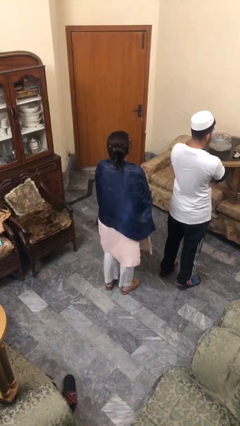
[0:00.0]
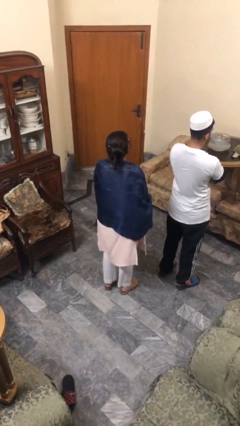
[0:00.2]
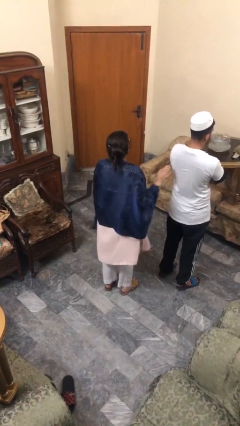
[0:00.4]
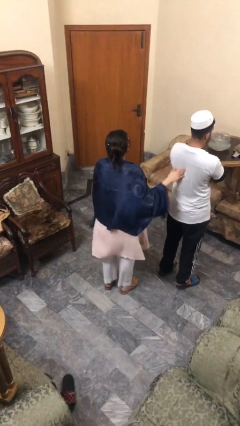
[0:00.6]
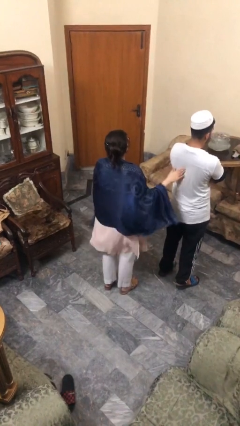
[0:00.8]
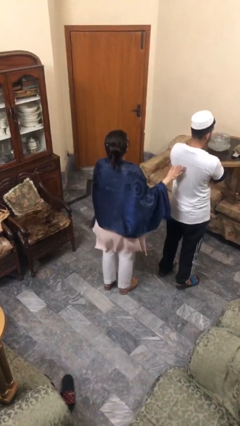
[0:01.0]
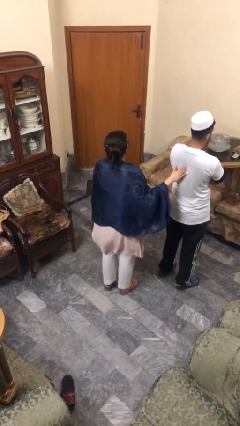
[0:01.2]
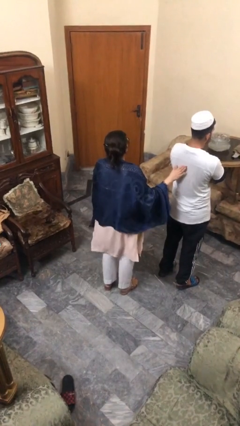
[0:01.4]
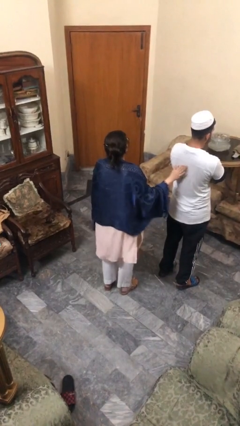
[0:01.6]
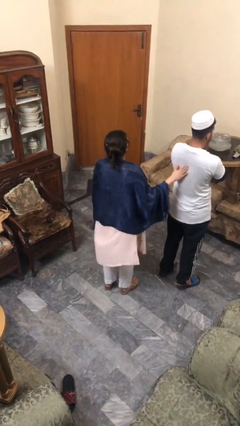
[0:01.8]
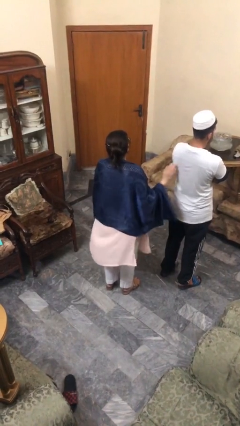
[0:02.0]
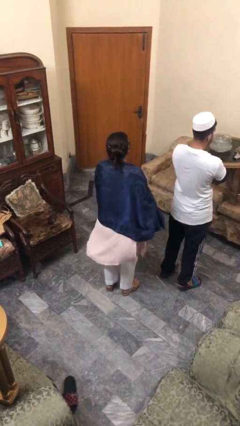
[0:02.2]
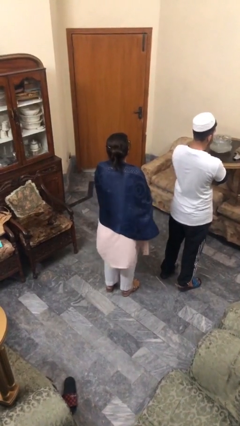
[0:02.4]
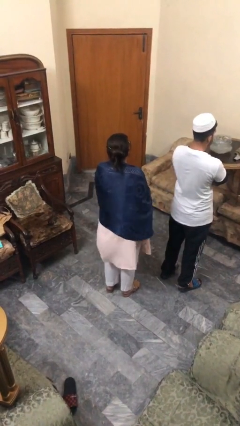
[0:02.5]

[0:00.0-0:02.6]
person touches back of person

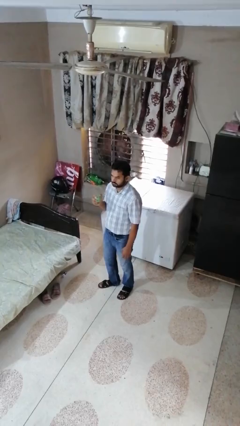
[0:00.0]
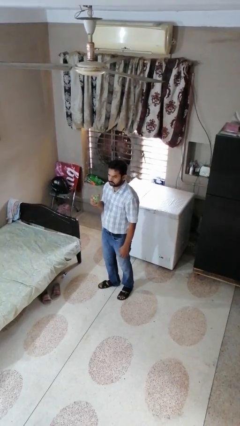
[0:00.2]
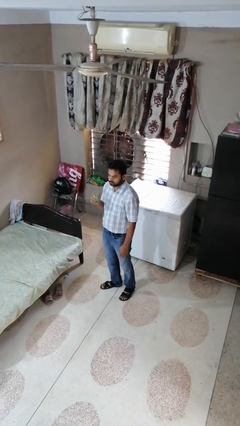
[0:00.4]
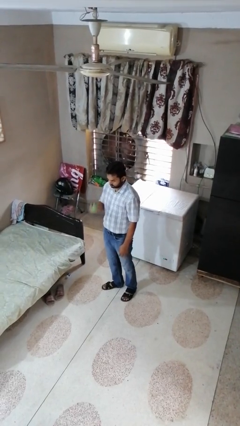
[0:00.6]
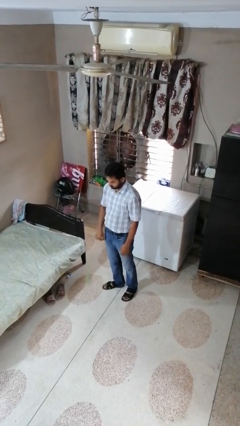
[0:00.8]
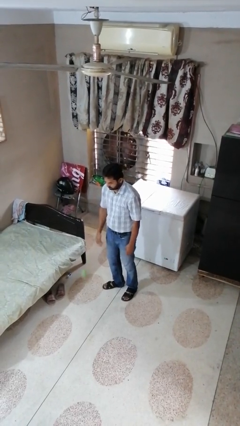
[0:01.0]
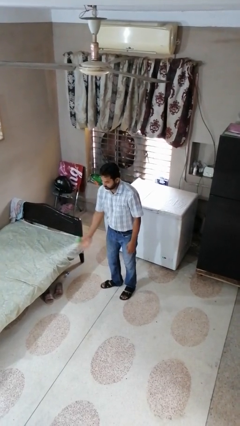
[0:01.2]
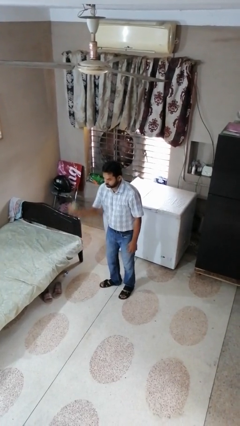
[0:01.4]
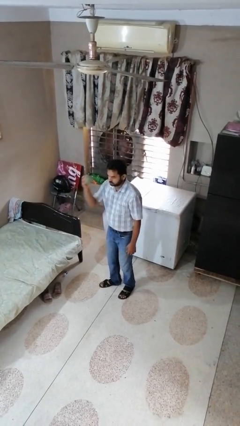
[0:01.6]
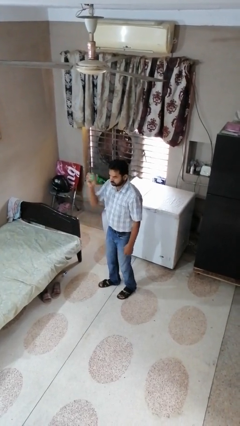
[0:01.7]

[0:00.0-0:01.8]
person bounces ball on floor

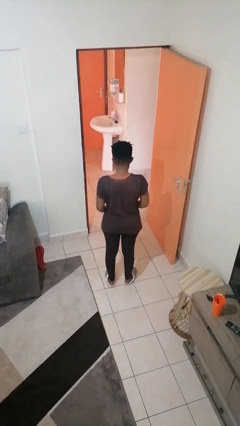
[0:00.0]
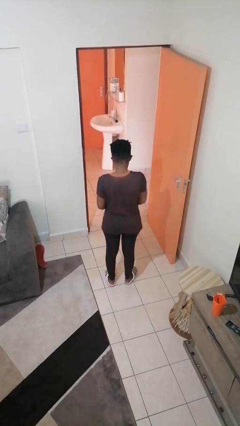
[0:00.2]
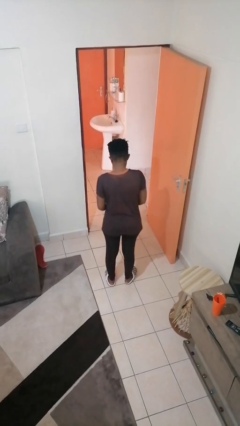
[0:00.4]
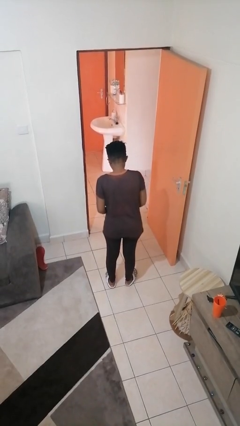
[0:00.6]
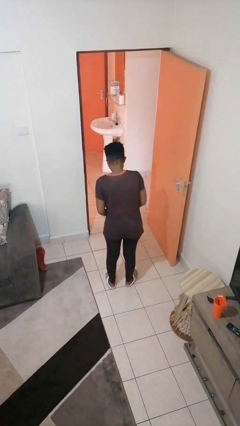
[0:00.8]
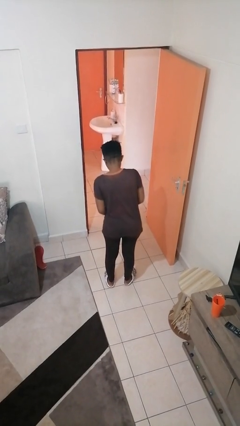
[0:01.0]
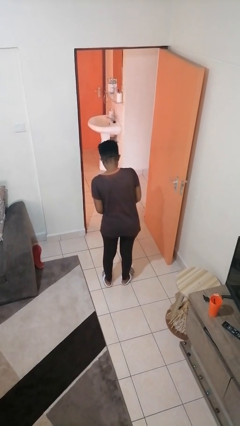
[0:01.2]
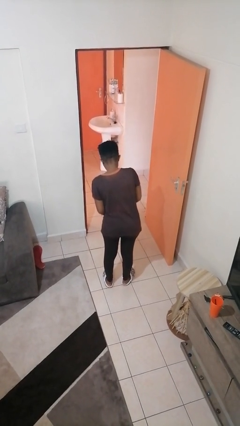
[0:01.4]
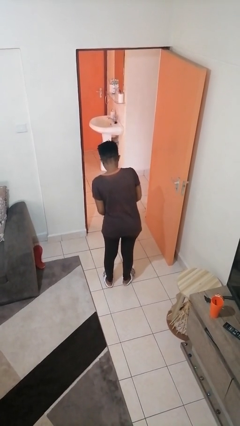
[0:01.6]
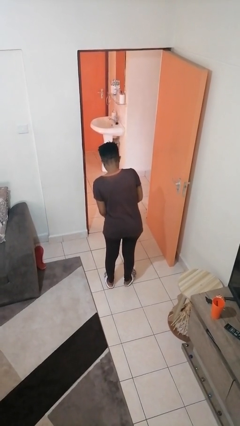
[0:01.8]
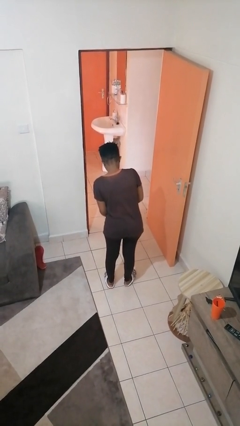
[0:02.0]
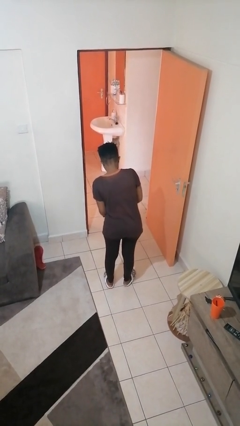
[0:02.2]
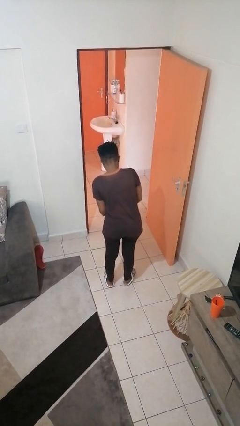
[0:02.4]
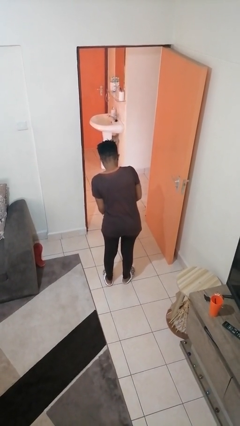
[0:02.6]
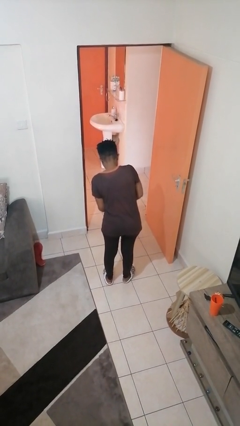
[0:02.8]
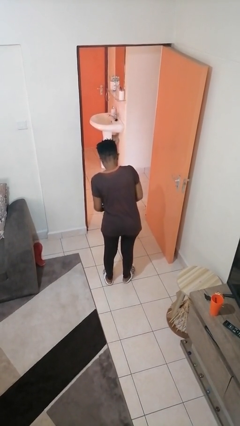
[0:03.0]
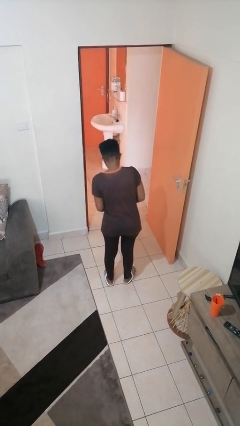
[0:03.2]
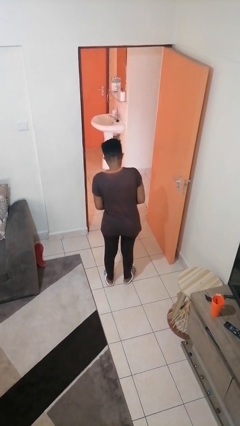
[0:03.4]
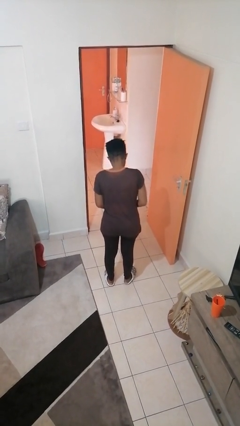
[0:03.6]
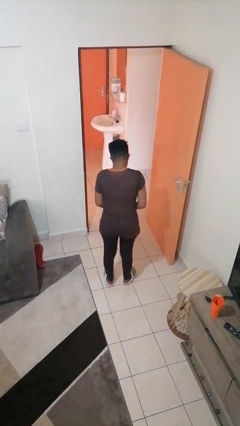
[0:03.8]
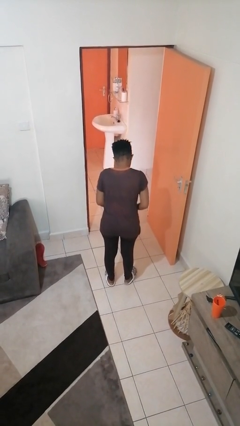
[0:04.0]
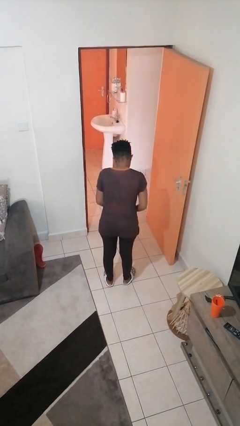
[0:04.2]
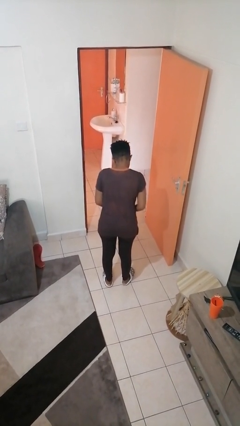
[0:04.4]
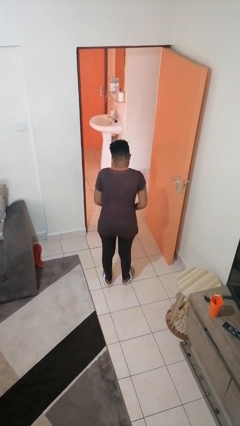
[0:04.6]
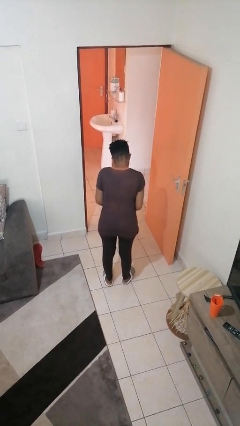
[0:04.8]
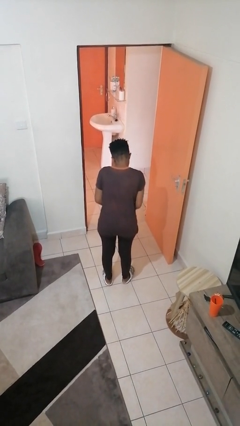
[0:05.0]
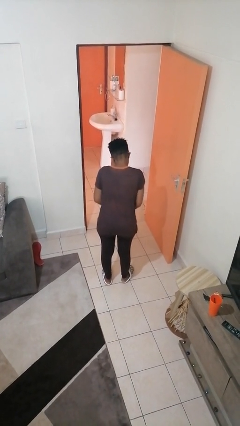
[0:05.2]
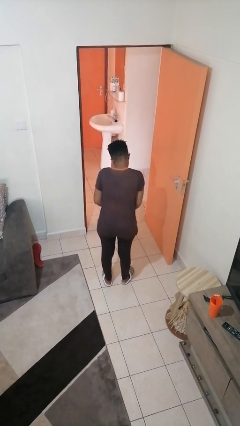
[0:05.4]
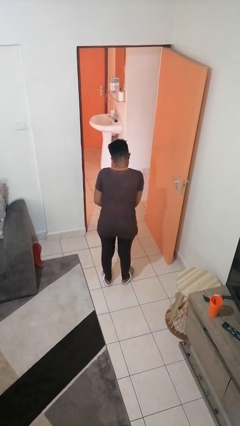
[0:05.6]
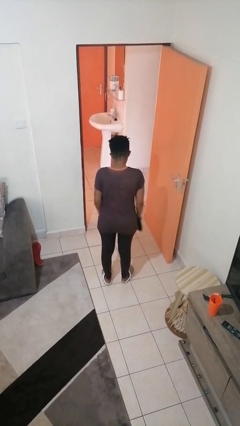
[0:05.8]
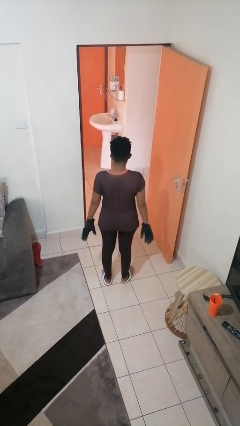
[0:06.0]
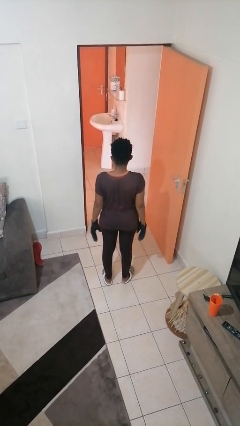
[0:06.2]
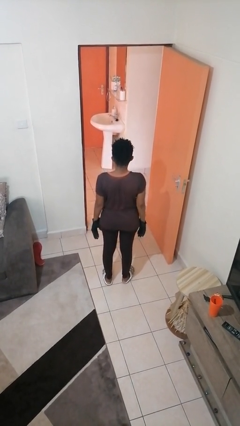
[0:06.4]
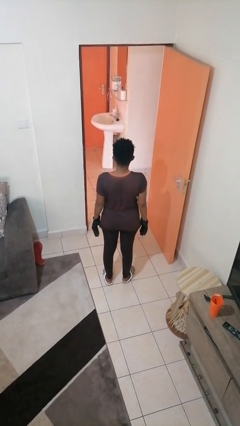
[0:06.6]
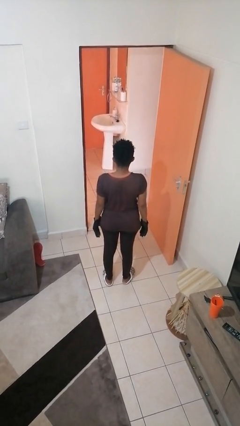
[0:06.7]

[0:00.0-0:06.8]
person puts on gloves

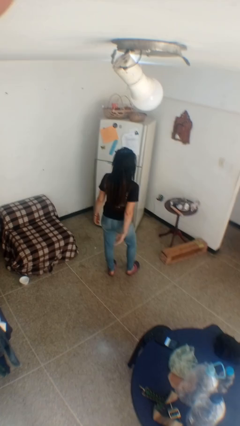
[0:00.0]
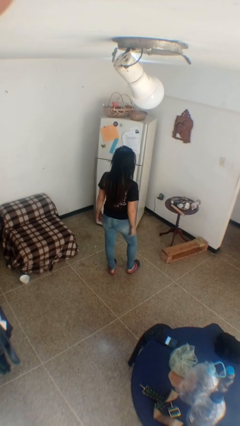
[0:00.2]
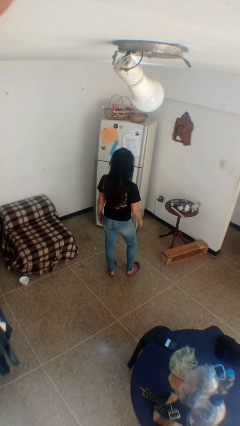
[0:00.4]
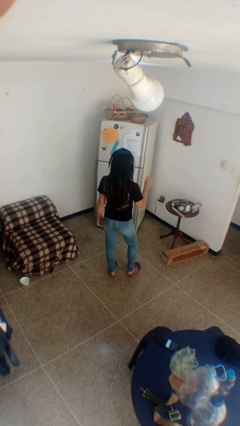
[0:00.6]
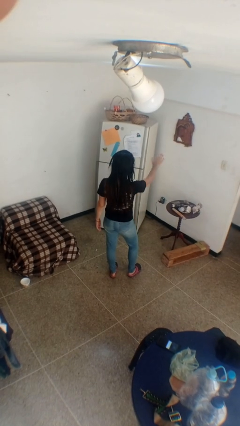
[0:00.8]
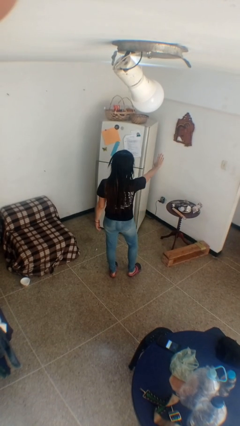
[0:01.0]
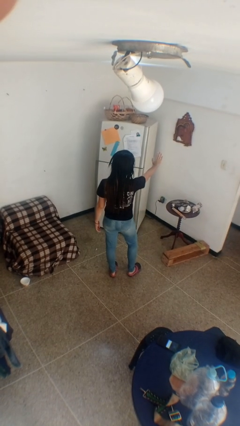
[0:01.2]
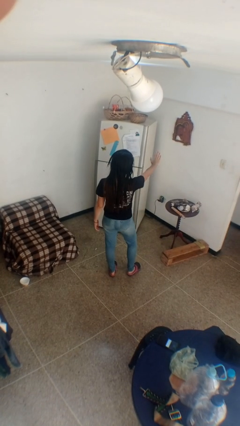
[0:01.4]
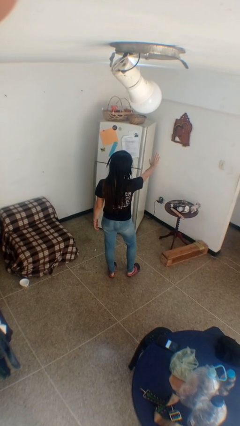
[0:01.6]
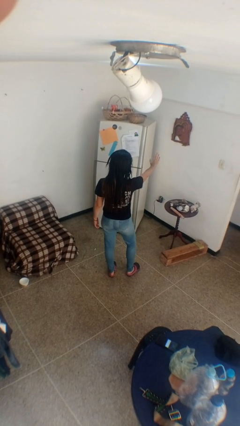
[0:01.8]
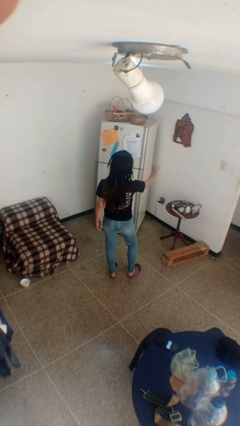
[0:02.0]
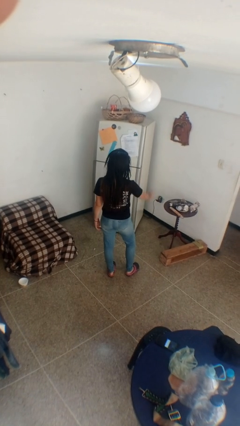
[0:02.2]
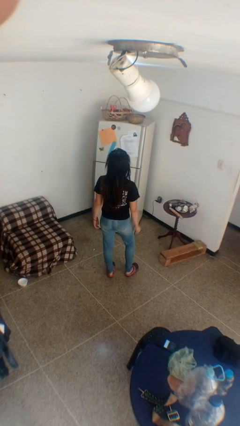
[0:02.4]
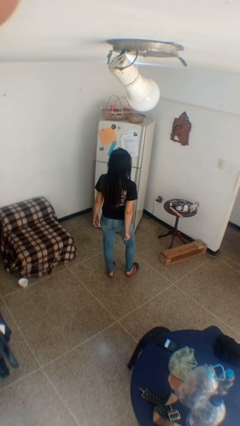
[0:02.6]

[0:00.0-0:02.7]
person gestures stop

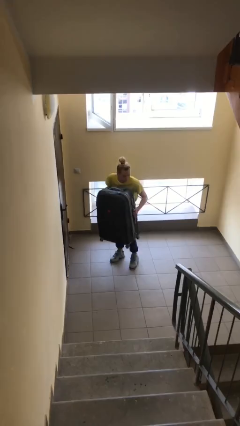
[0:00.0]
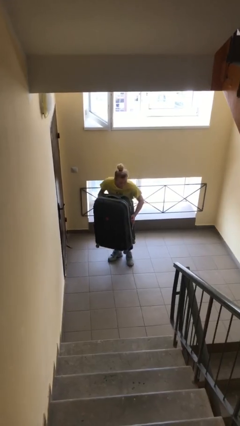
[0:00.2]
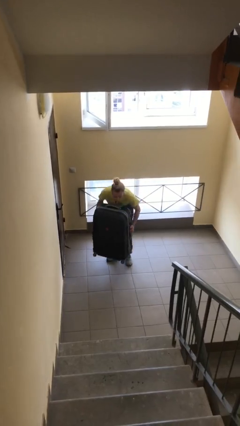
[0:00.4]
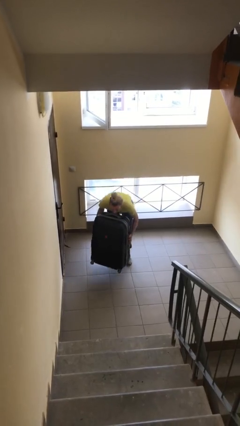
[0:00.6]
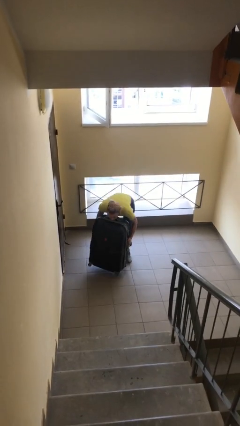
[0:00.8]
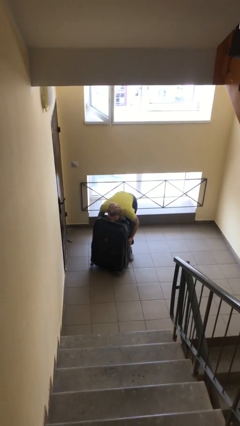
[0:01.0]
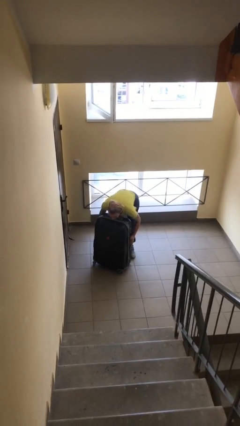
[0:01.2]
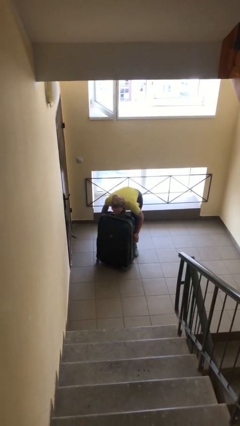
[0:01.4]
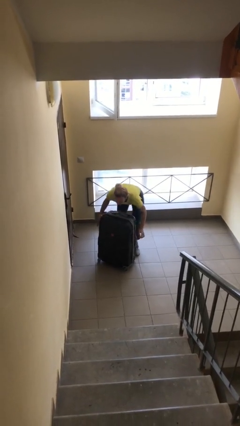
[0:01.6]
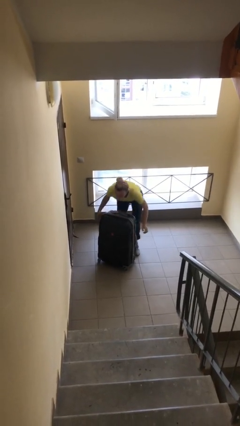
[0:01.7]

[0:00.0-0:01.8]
person puts down object on floor

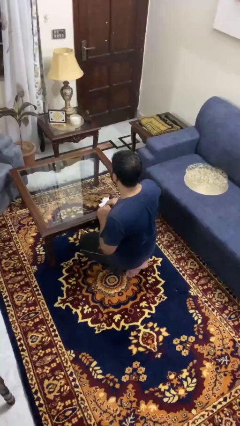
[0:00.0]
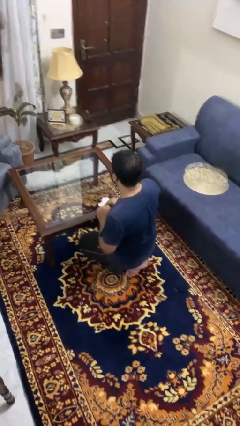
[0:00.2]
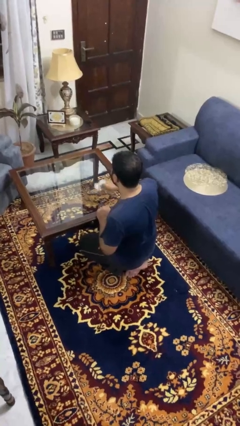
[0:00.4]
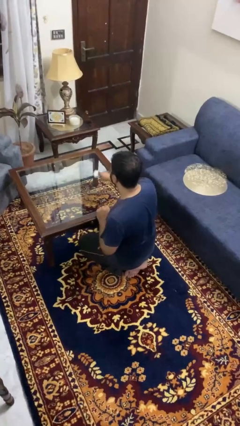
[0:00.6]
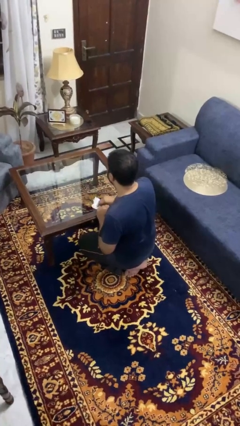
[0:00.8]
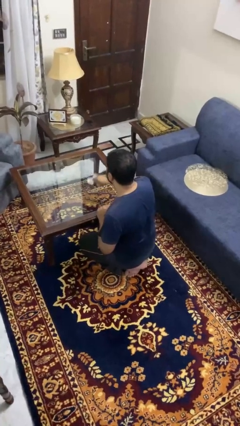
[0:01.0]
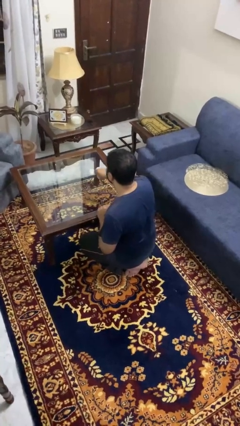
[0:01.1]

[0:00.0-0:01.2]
person cleans table with rag

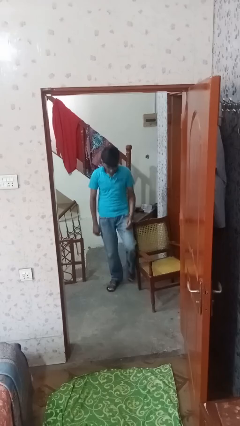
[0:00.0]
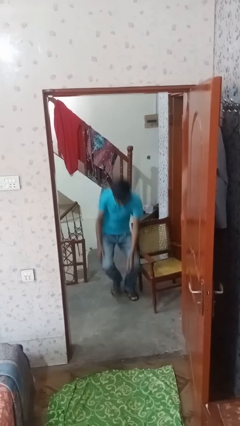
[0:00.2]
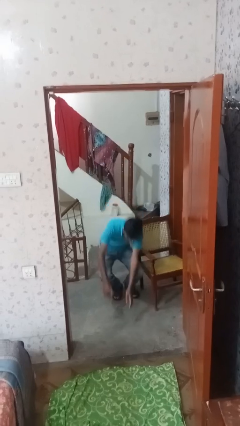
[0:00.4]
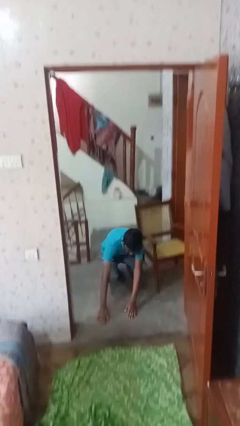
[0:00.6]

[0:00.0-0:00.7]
person trips on object on floor
